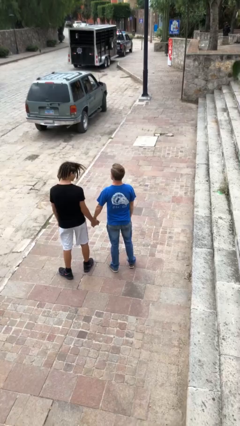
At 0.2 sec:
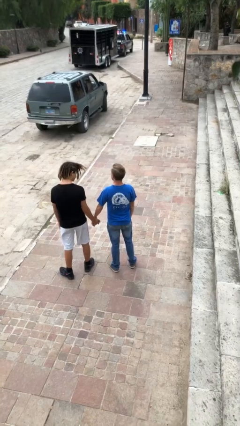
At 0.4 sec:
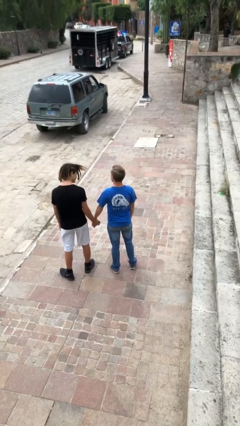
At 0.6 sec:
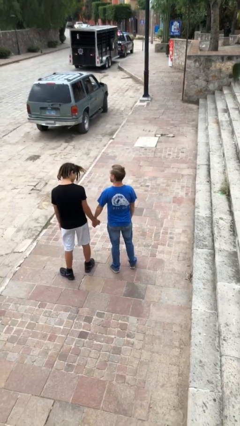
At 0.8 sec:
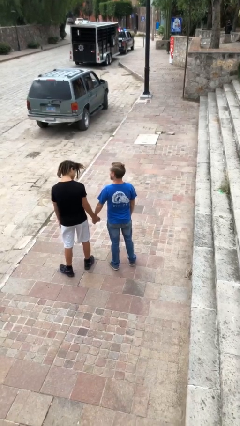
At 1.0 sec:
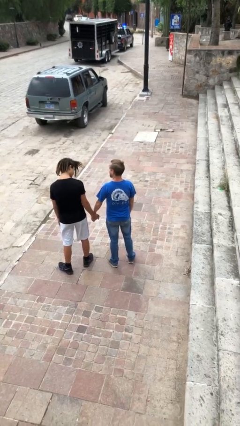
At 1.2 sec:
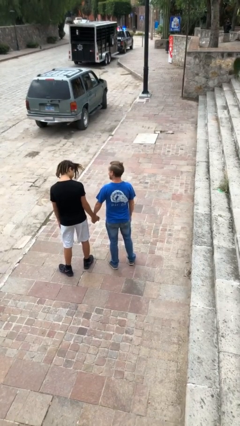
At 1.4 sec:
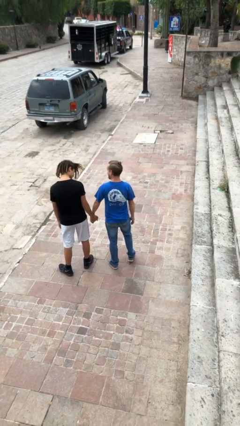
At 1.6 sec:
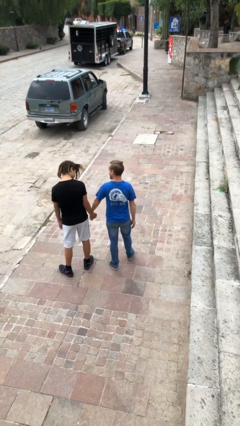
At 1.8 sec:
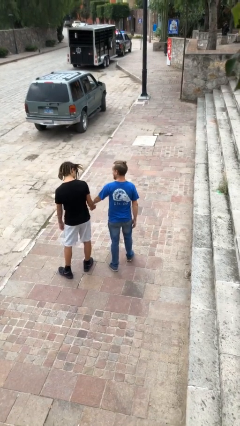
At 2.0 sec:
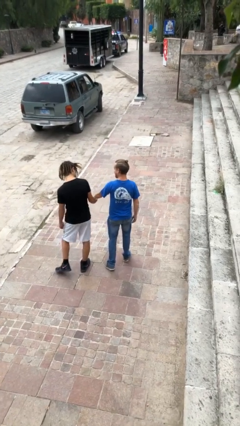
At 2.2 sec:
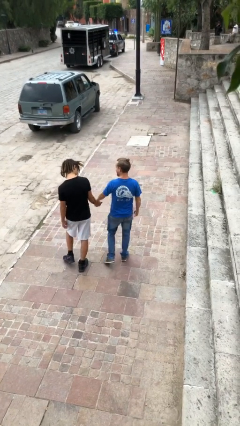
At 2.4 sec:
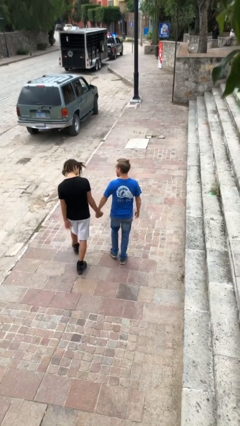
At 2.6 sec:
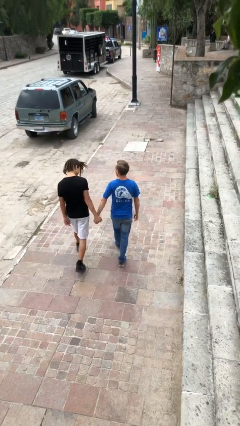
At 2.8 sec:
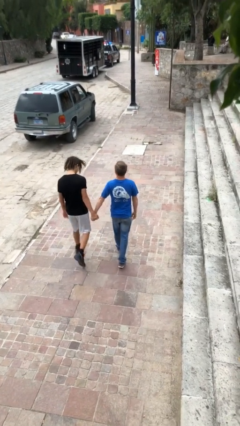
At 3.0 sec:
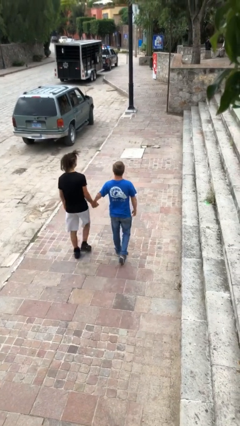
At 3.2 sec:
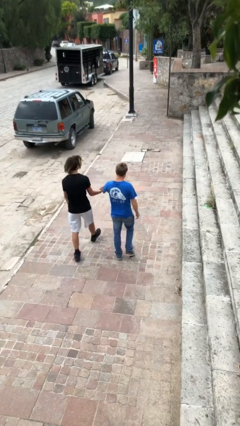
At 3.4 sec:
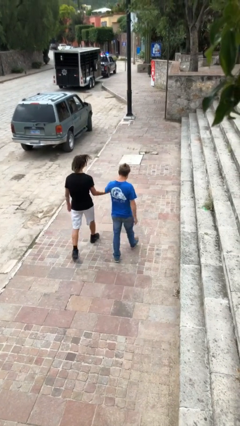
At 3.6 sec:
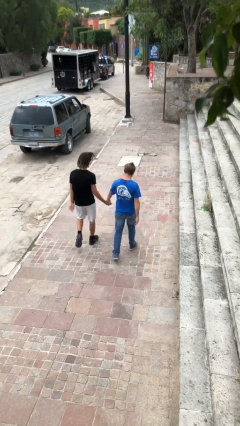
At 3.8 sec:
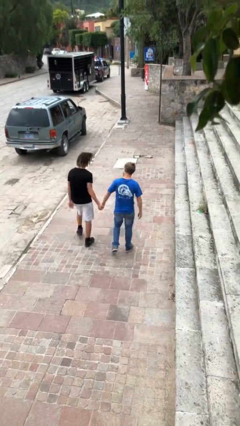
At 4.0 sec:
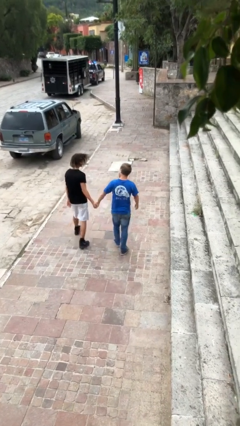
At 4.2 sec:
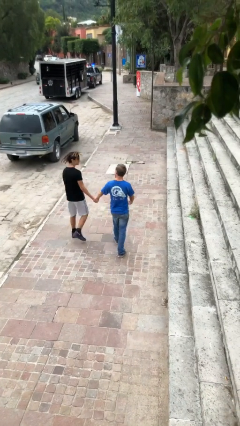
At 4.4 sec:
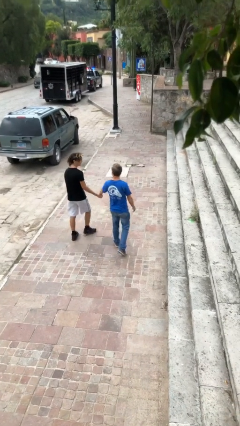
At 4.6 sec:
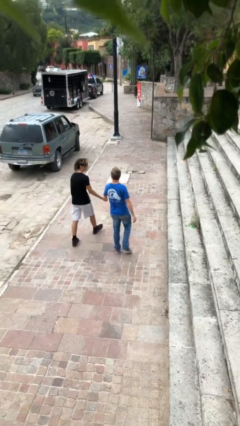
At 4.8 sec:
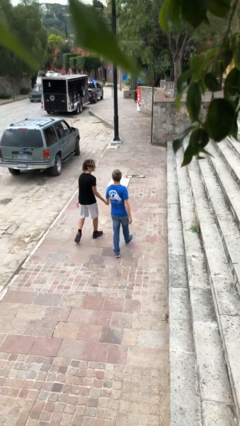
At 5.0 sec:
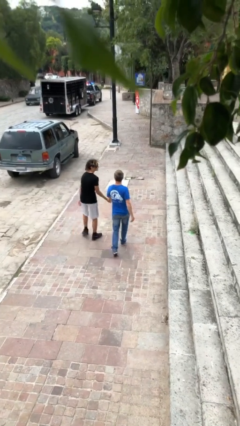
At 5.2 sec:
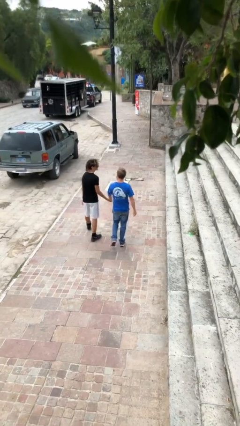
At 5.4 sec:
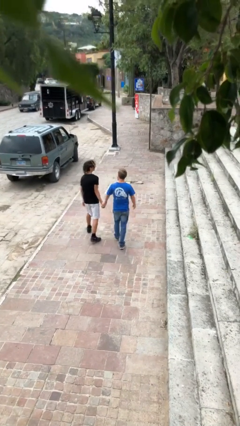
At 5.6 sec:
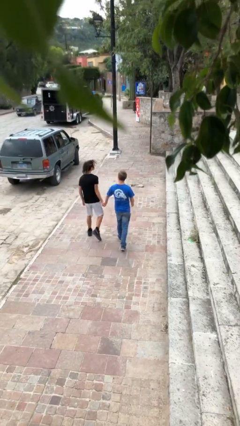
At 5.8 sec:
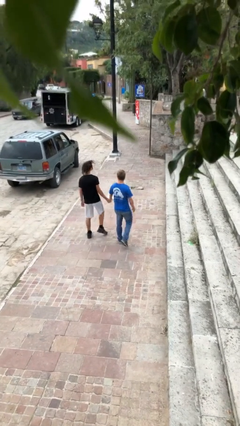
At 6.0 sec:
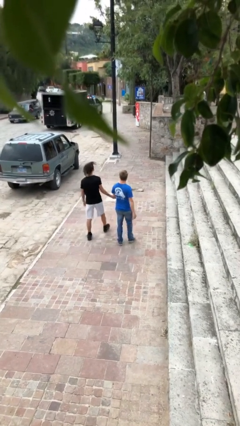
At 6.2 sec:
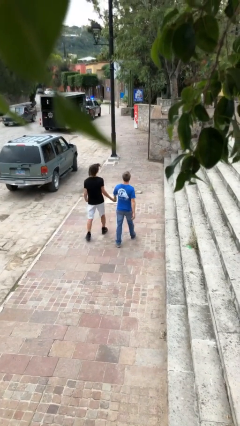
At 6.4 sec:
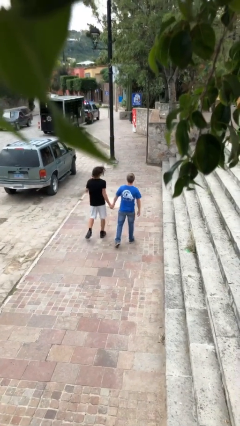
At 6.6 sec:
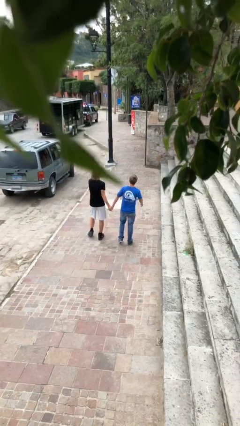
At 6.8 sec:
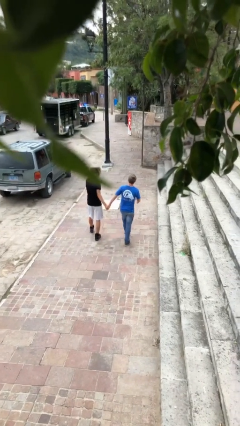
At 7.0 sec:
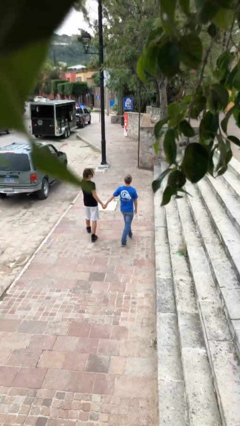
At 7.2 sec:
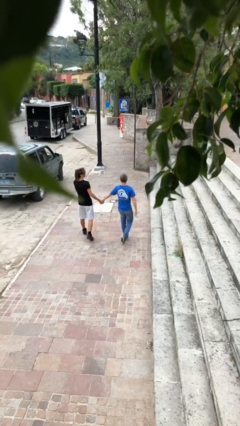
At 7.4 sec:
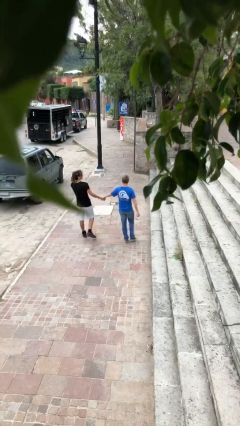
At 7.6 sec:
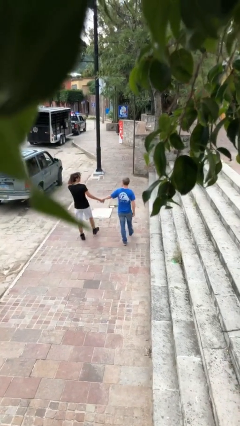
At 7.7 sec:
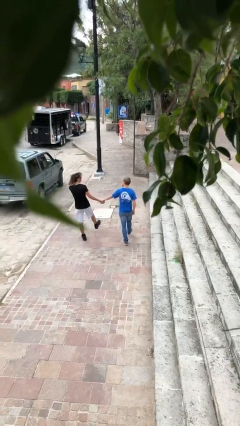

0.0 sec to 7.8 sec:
person holds hand

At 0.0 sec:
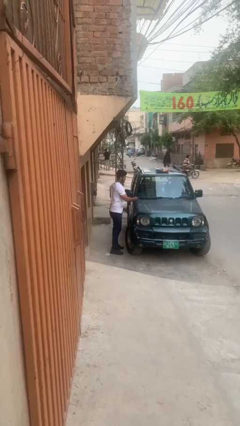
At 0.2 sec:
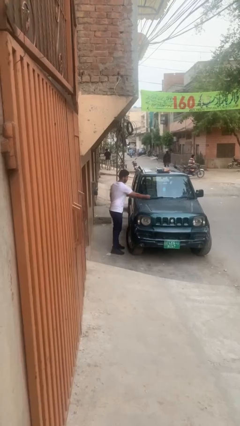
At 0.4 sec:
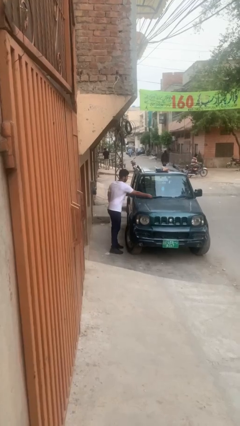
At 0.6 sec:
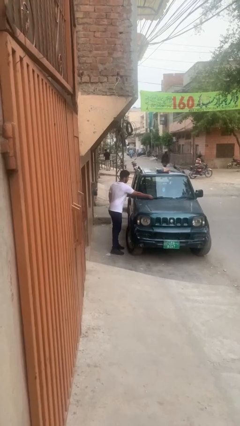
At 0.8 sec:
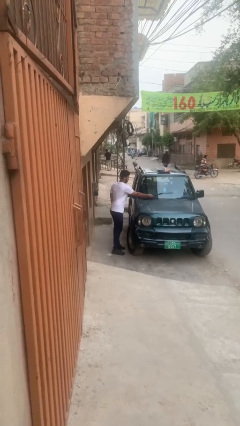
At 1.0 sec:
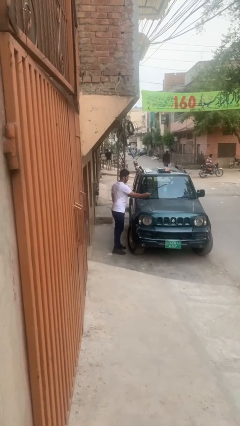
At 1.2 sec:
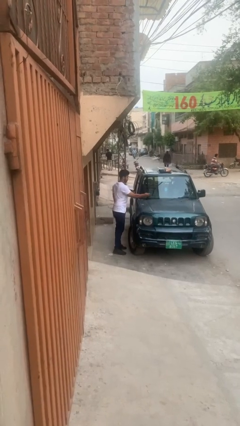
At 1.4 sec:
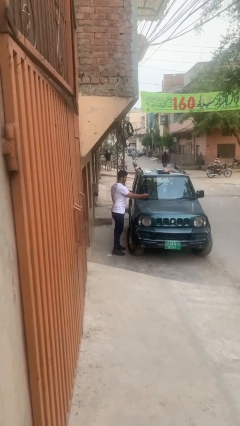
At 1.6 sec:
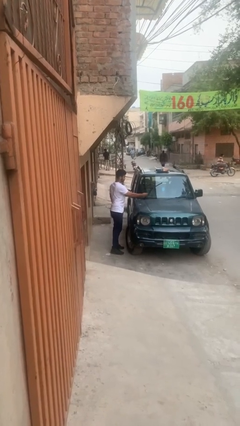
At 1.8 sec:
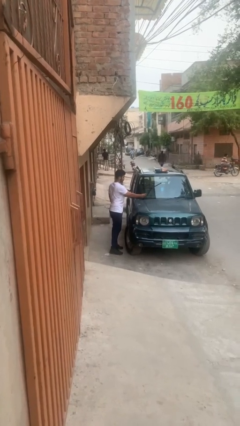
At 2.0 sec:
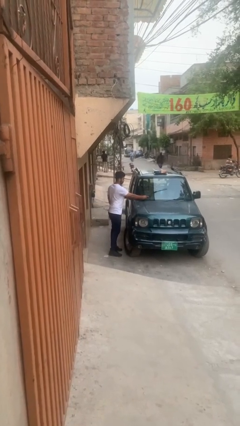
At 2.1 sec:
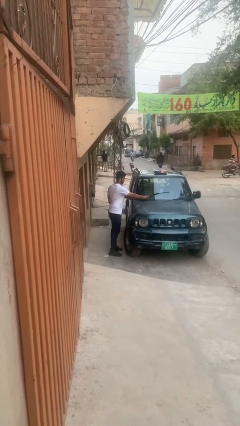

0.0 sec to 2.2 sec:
person flips up car wipers

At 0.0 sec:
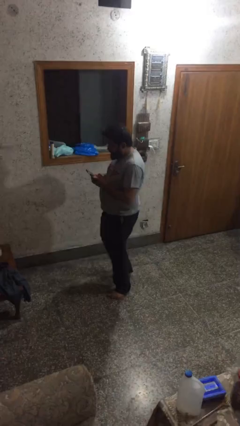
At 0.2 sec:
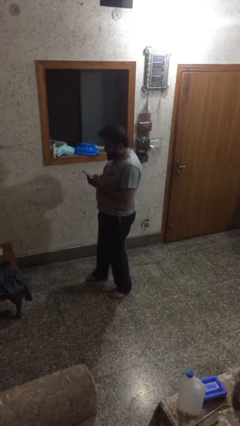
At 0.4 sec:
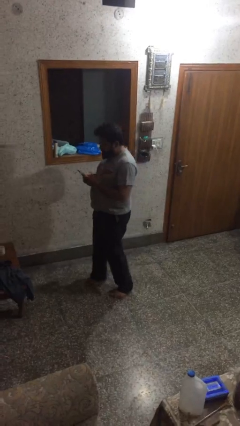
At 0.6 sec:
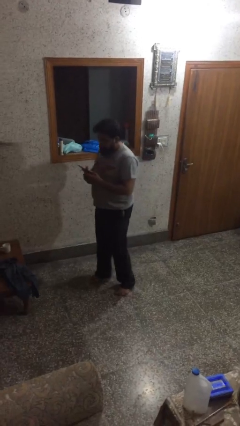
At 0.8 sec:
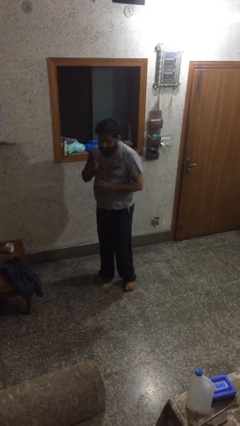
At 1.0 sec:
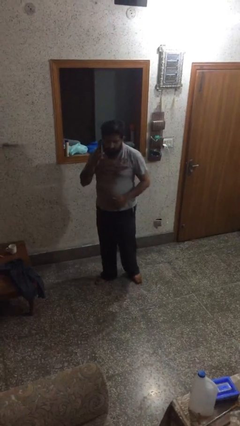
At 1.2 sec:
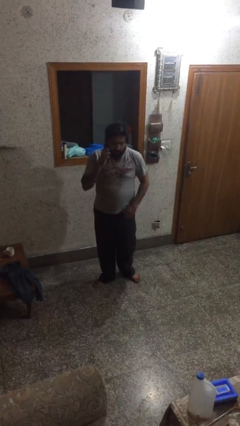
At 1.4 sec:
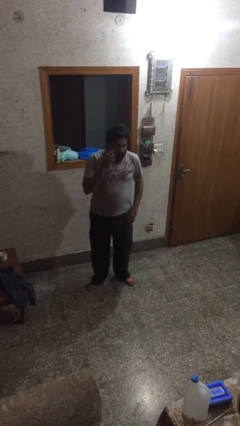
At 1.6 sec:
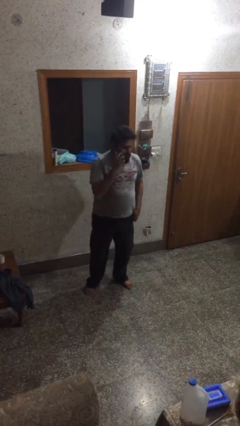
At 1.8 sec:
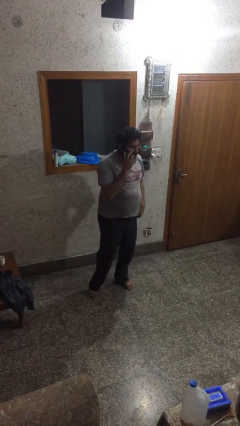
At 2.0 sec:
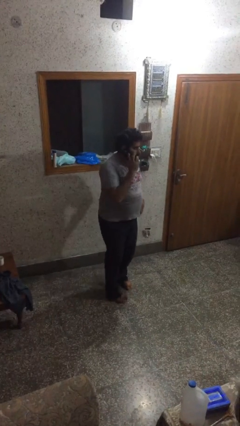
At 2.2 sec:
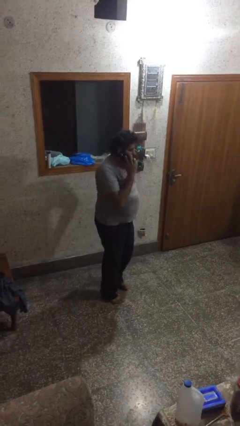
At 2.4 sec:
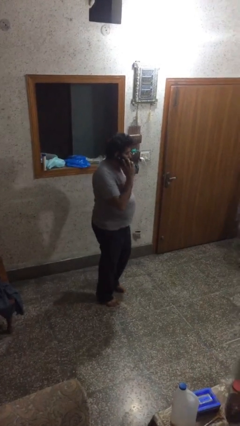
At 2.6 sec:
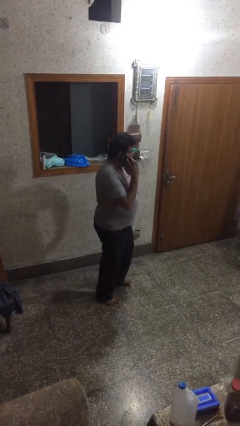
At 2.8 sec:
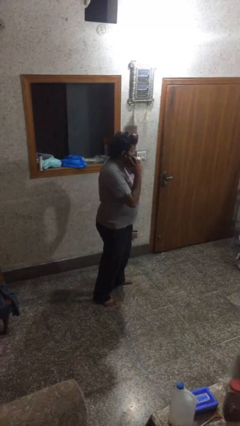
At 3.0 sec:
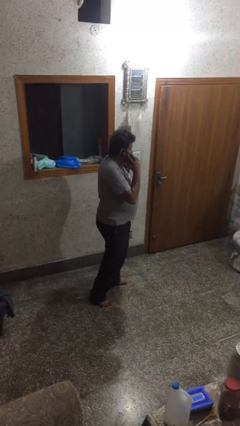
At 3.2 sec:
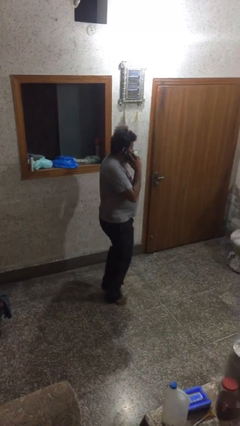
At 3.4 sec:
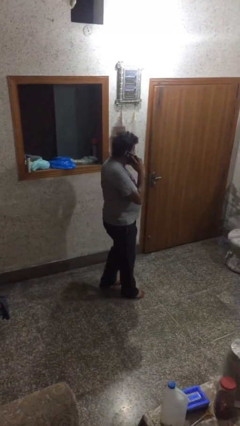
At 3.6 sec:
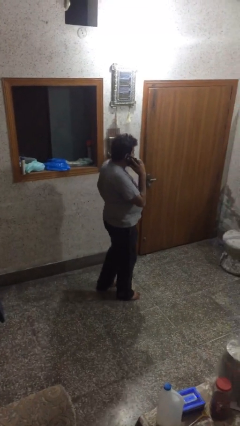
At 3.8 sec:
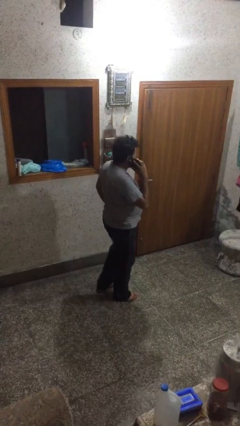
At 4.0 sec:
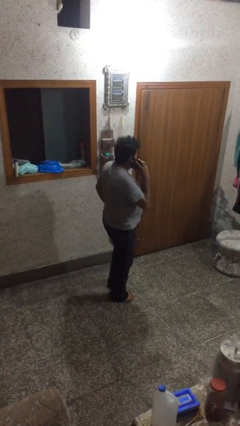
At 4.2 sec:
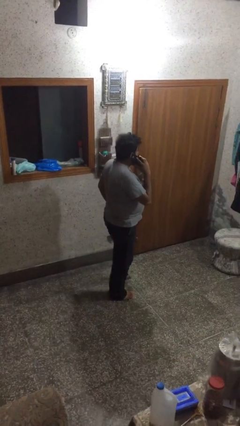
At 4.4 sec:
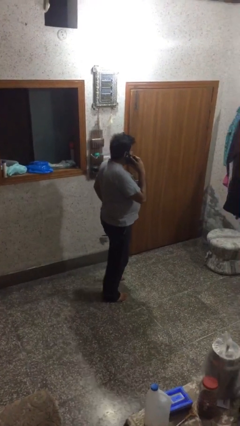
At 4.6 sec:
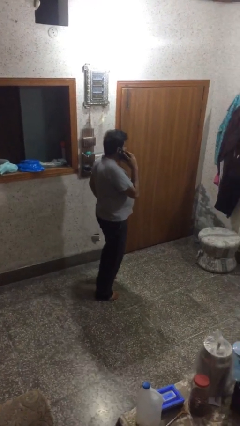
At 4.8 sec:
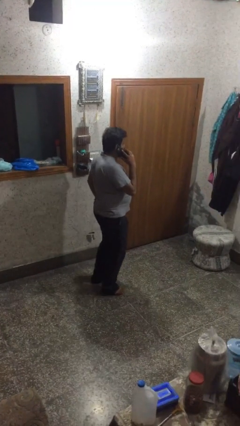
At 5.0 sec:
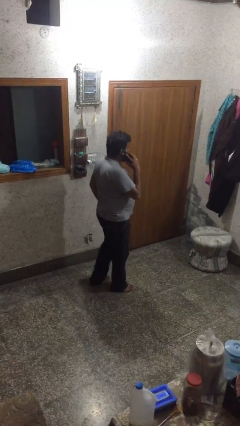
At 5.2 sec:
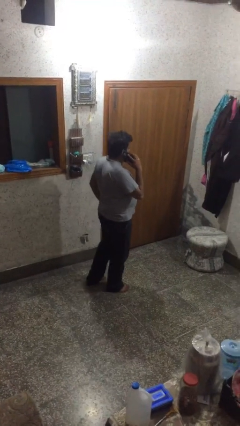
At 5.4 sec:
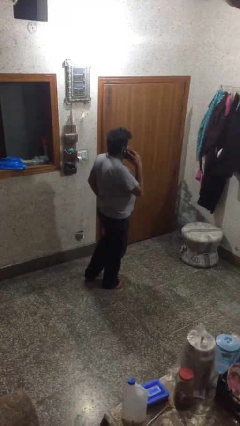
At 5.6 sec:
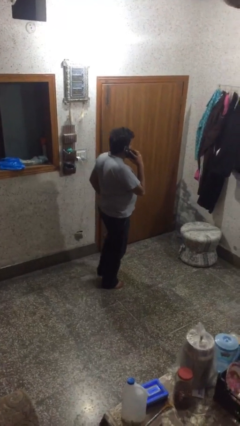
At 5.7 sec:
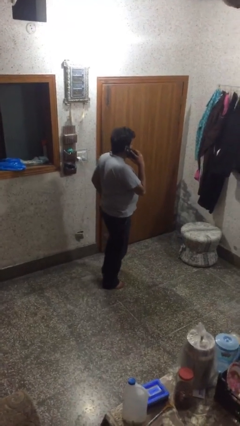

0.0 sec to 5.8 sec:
person talks on phone

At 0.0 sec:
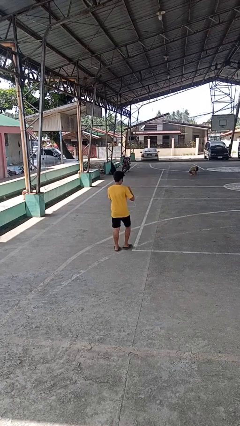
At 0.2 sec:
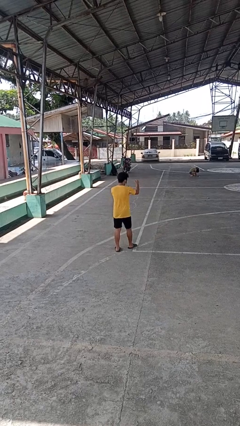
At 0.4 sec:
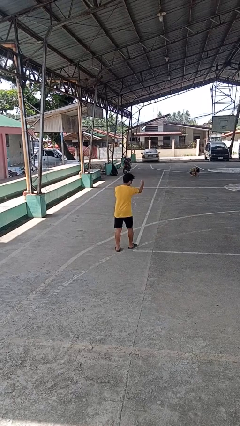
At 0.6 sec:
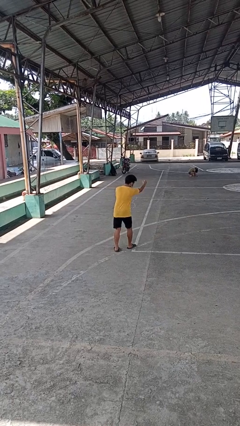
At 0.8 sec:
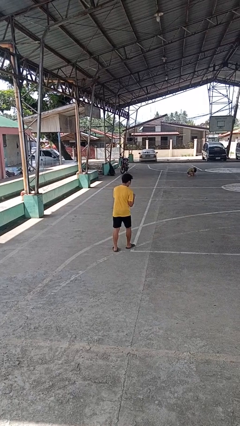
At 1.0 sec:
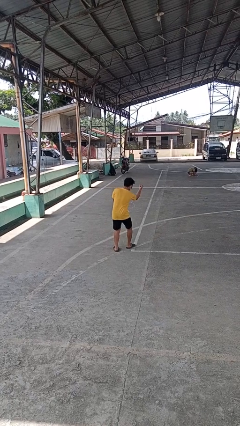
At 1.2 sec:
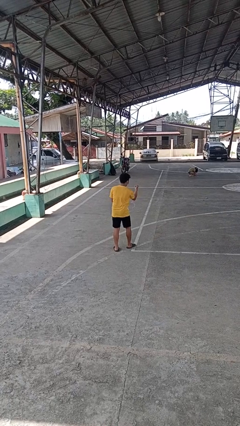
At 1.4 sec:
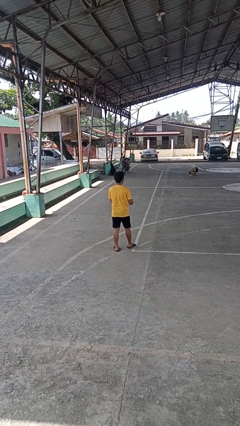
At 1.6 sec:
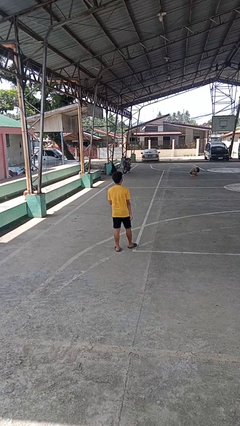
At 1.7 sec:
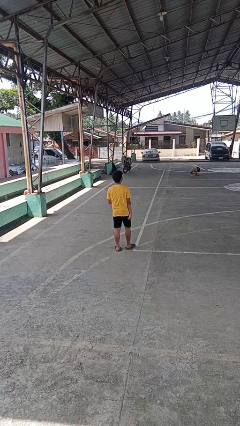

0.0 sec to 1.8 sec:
person punches

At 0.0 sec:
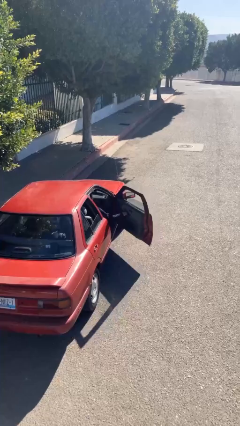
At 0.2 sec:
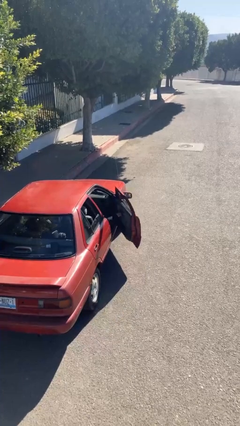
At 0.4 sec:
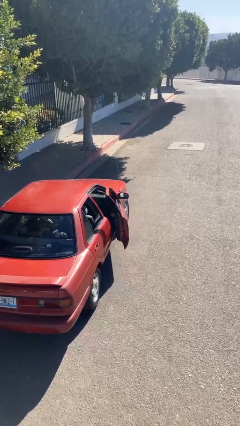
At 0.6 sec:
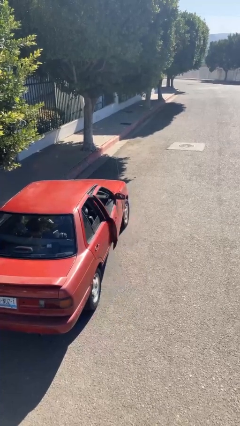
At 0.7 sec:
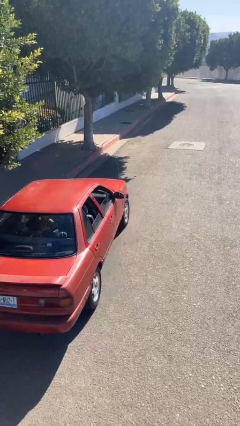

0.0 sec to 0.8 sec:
person closes car door
